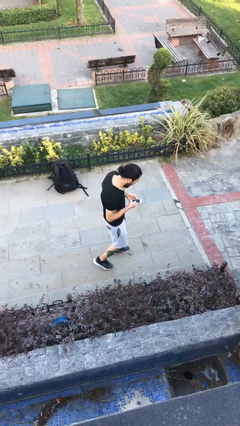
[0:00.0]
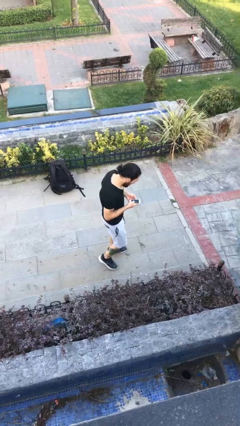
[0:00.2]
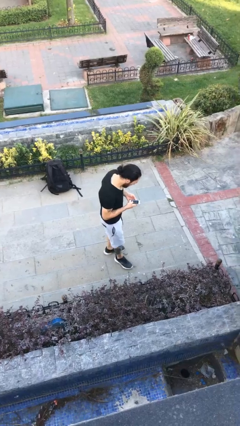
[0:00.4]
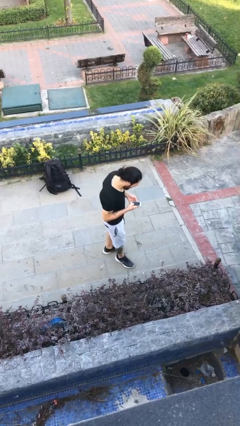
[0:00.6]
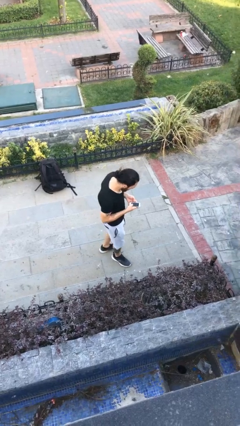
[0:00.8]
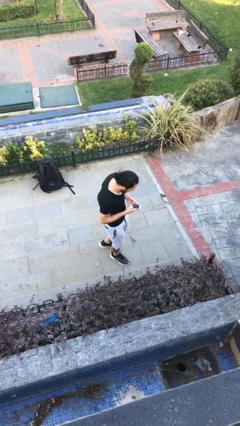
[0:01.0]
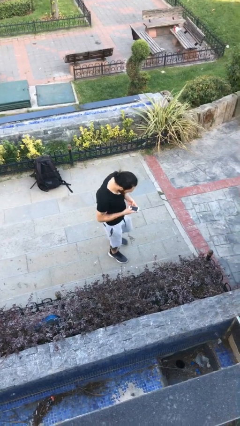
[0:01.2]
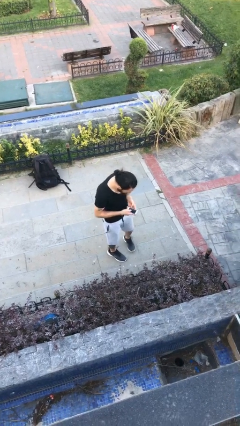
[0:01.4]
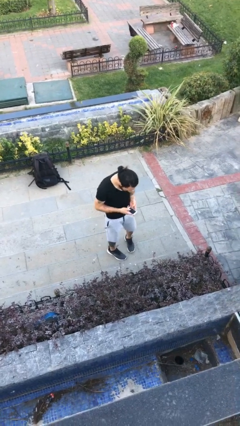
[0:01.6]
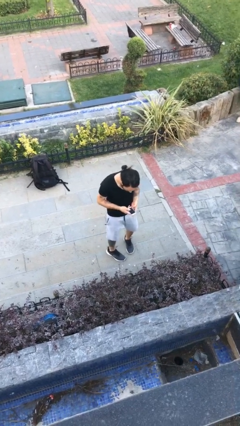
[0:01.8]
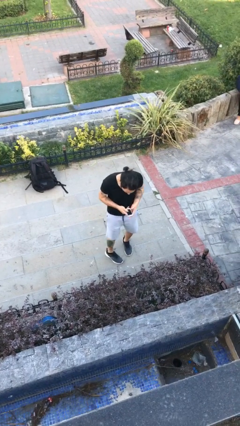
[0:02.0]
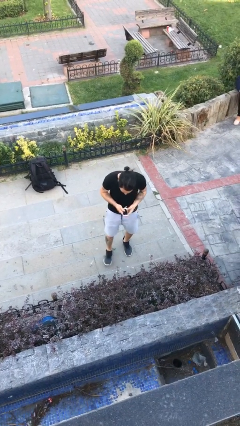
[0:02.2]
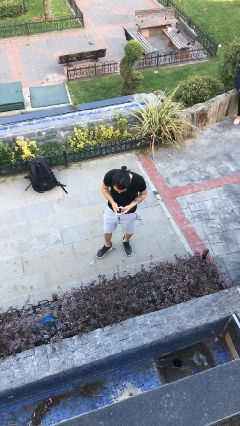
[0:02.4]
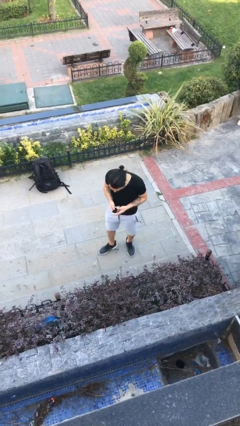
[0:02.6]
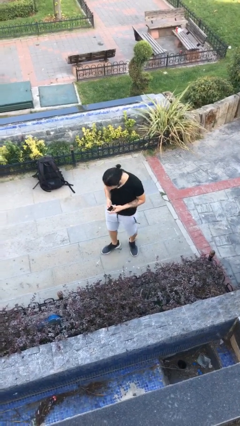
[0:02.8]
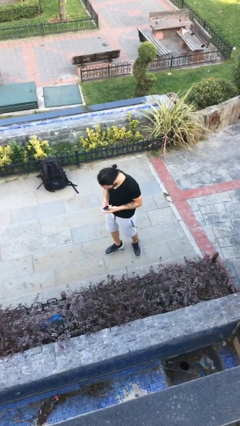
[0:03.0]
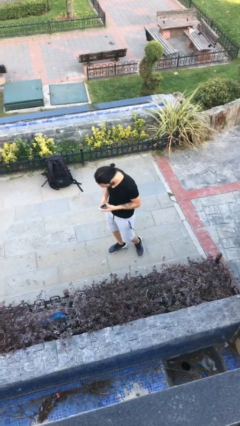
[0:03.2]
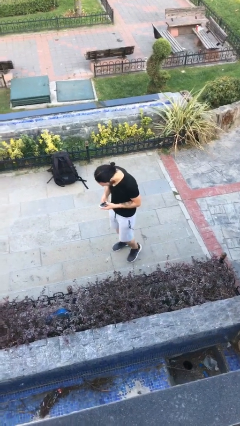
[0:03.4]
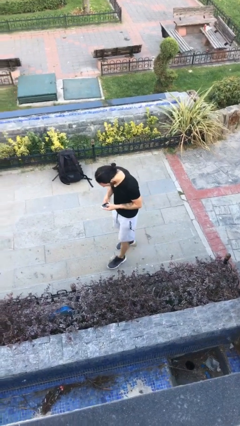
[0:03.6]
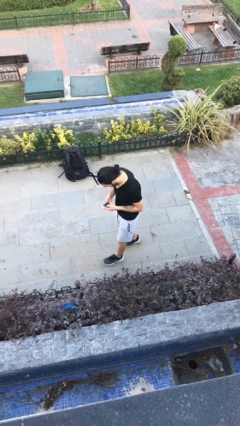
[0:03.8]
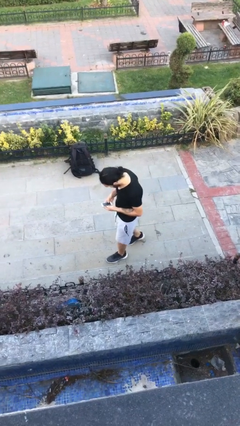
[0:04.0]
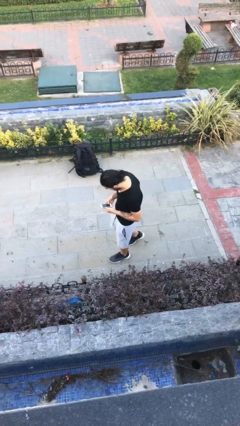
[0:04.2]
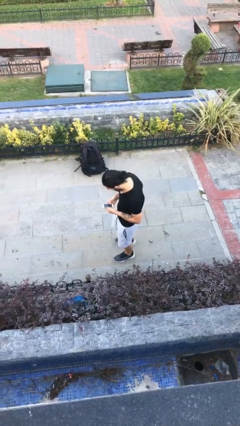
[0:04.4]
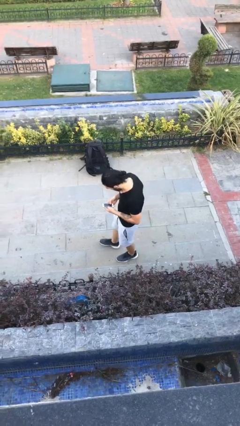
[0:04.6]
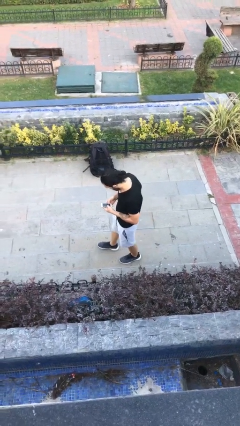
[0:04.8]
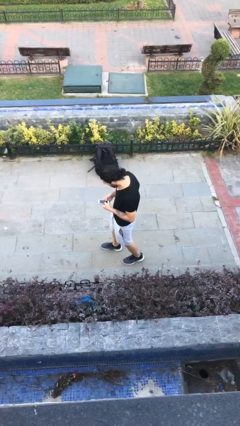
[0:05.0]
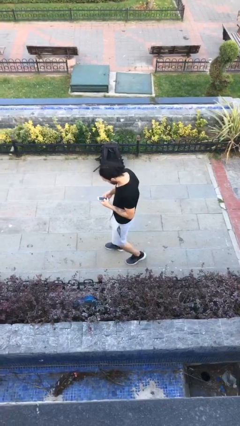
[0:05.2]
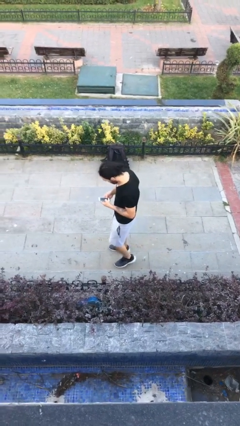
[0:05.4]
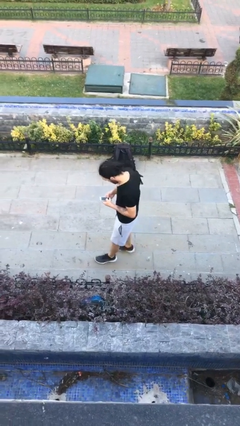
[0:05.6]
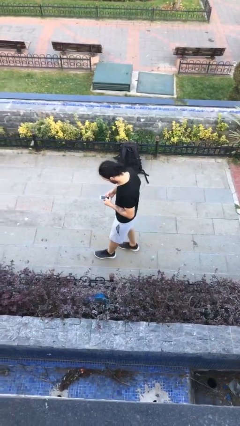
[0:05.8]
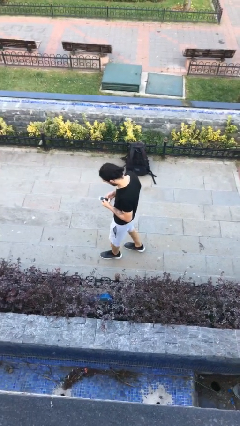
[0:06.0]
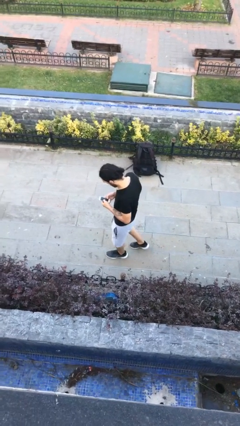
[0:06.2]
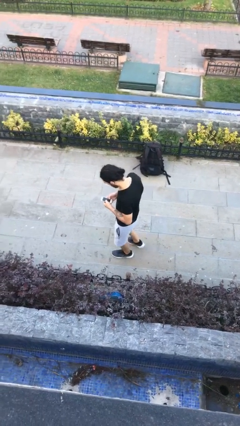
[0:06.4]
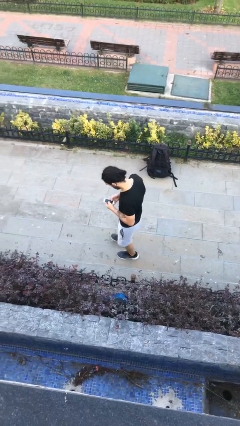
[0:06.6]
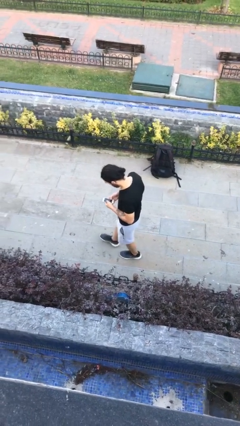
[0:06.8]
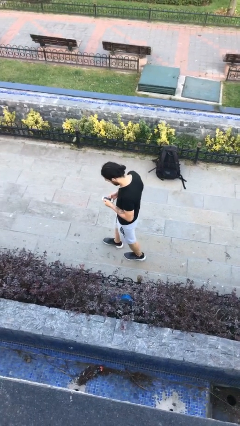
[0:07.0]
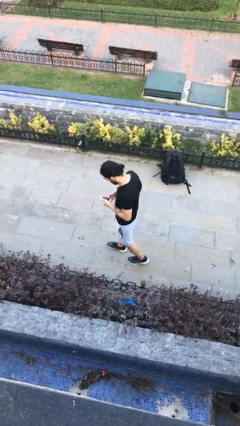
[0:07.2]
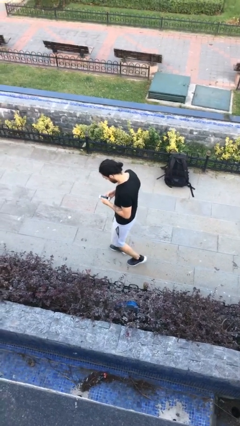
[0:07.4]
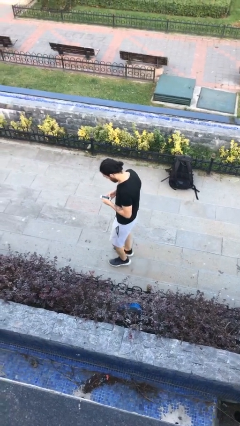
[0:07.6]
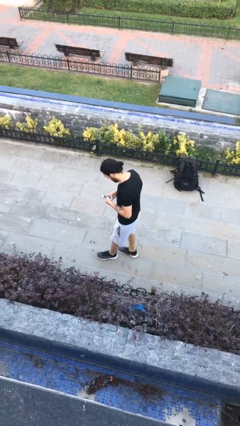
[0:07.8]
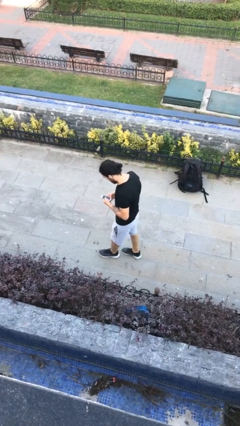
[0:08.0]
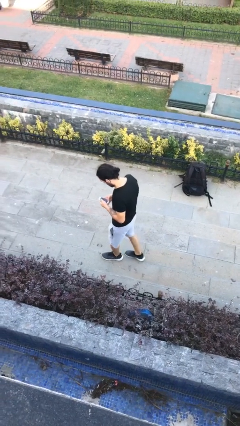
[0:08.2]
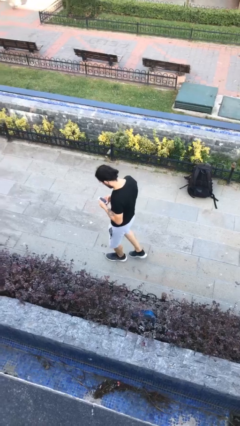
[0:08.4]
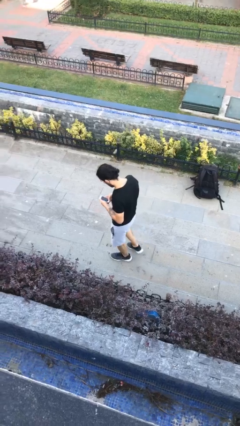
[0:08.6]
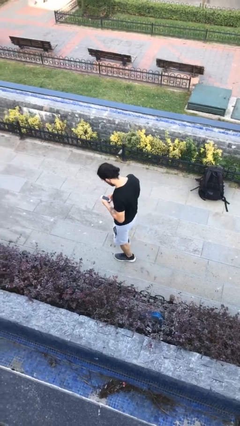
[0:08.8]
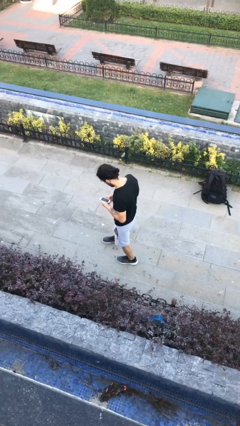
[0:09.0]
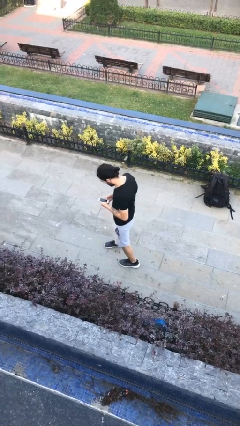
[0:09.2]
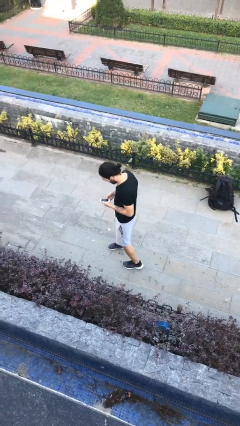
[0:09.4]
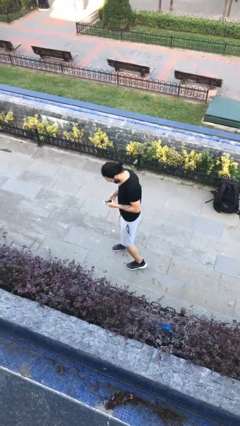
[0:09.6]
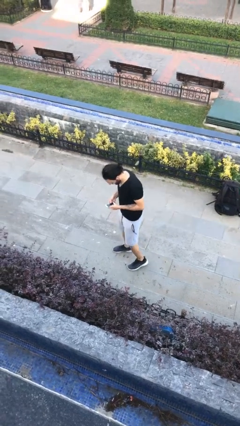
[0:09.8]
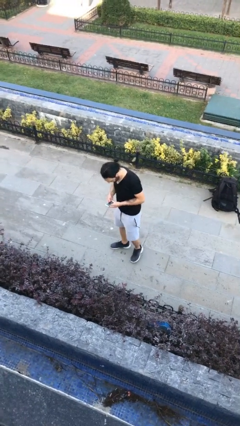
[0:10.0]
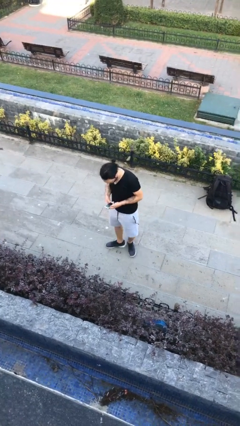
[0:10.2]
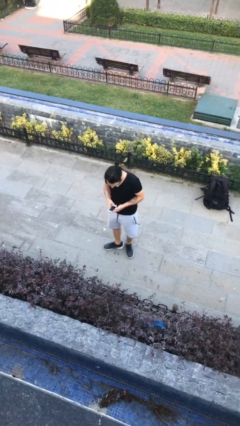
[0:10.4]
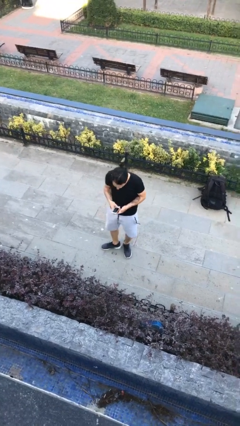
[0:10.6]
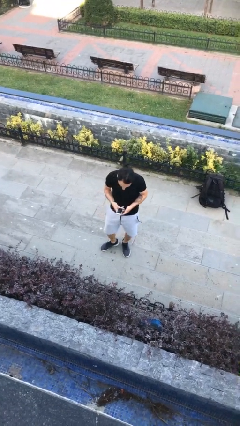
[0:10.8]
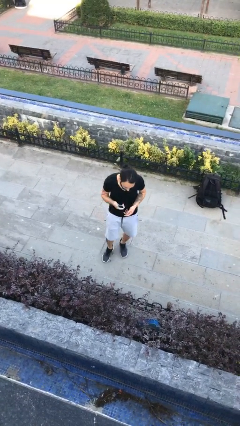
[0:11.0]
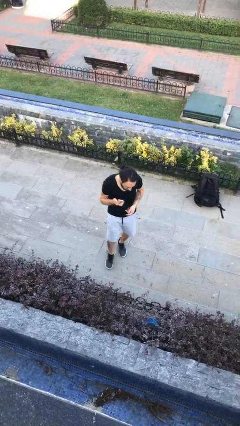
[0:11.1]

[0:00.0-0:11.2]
person texts on phone

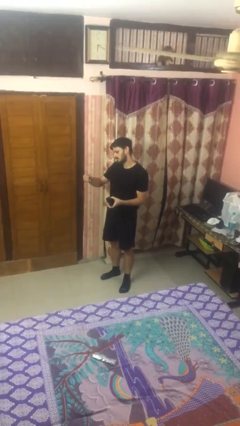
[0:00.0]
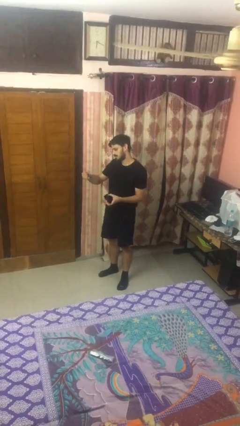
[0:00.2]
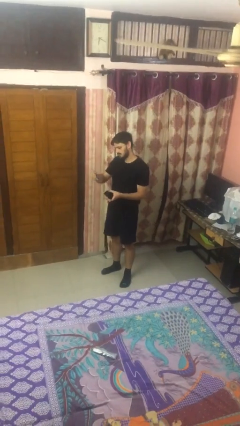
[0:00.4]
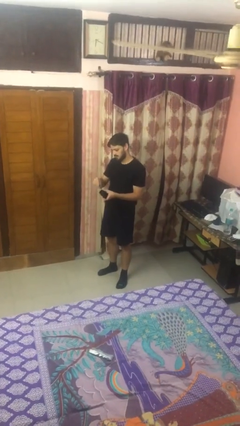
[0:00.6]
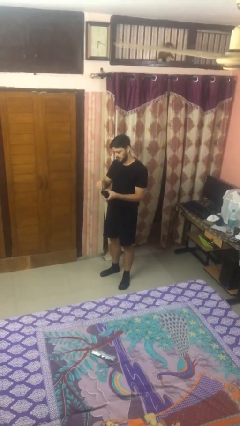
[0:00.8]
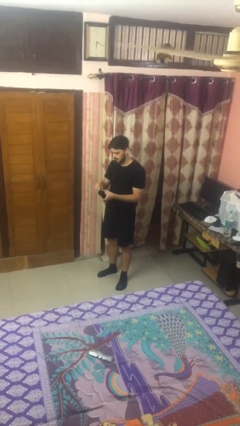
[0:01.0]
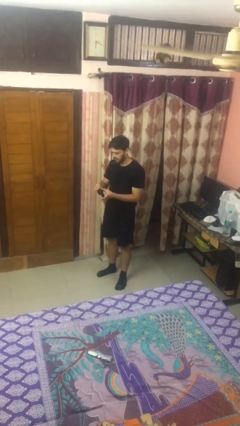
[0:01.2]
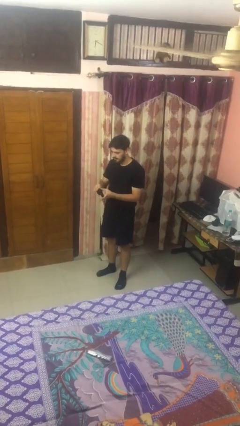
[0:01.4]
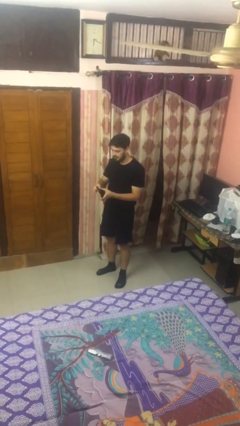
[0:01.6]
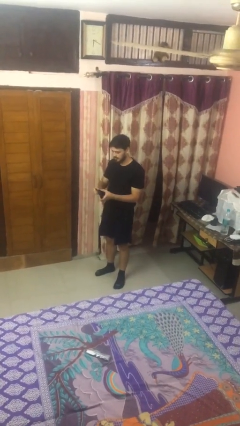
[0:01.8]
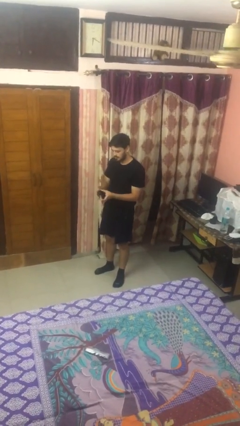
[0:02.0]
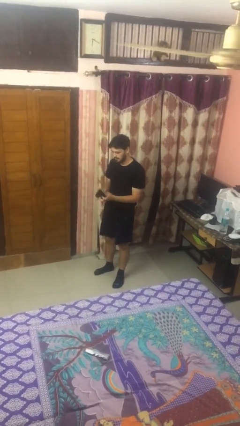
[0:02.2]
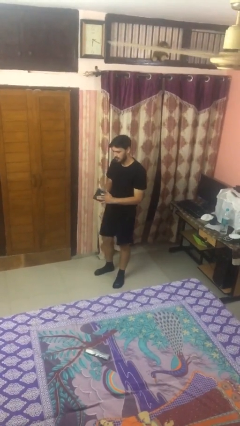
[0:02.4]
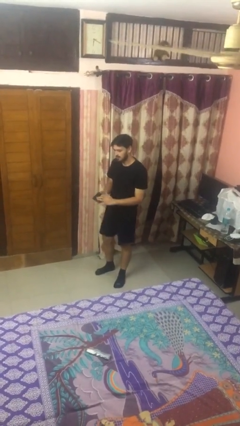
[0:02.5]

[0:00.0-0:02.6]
person puts object into purse

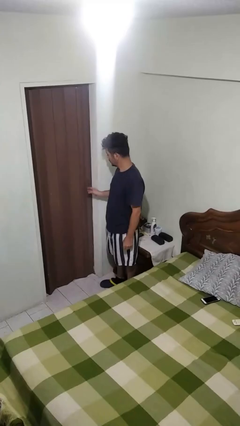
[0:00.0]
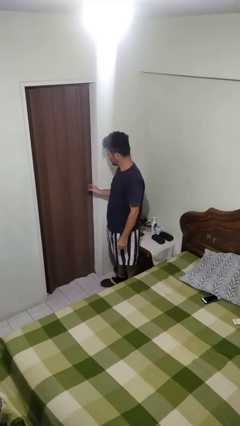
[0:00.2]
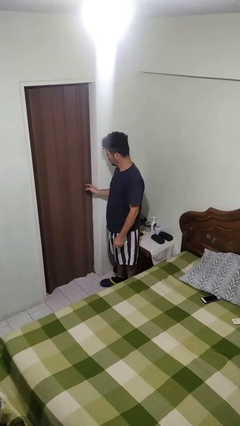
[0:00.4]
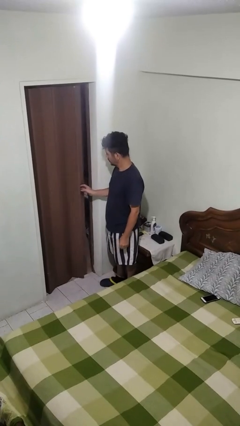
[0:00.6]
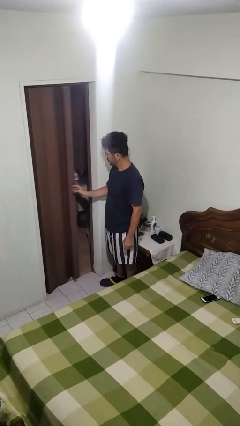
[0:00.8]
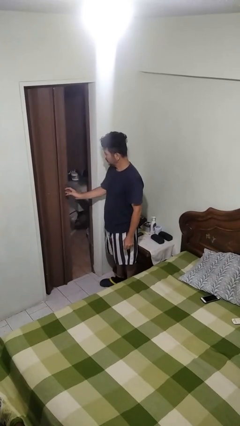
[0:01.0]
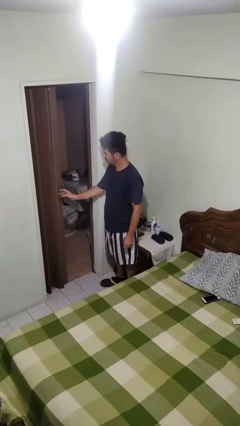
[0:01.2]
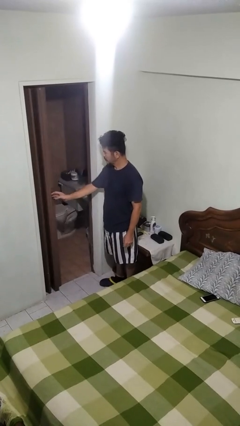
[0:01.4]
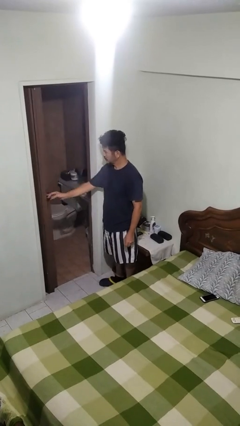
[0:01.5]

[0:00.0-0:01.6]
person opens sliding door

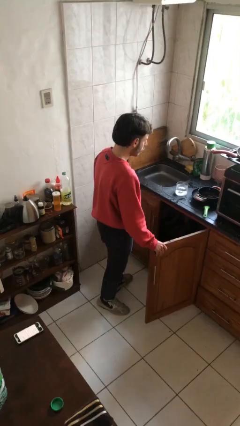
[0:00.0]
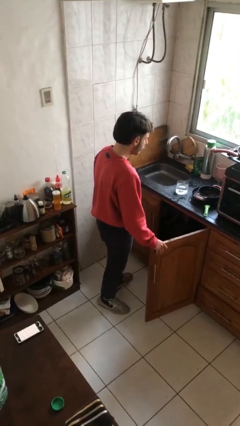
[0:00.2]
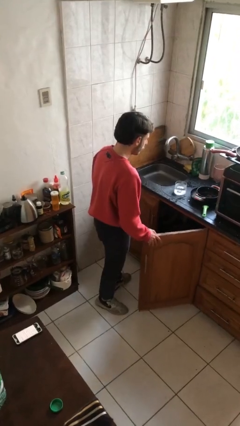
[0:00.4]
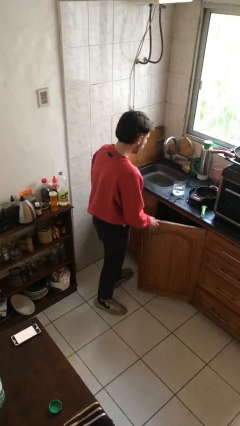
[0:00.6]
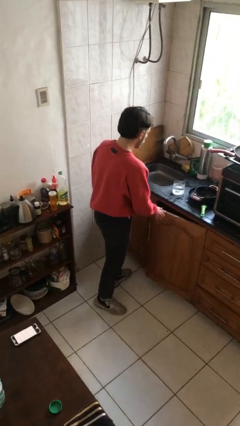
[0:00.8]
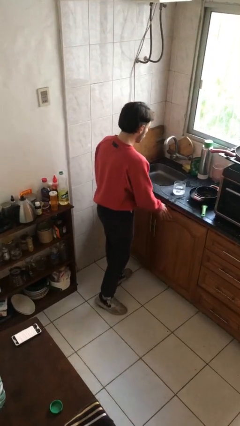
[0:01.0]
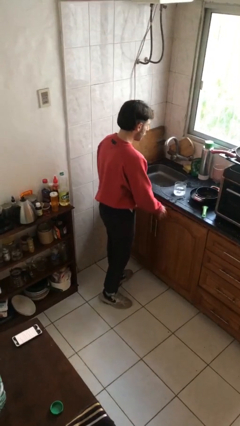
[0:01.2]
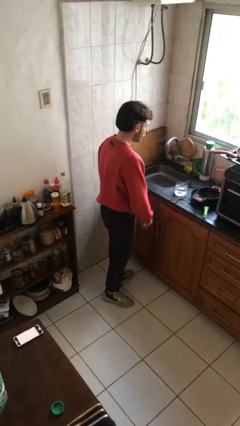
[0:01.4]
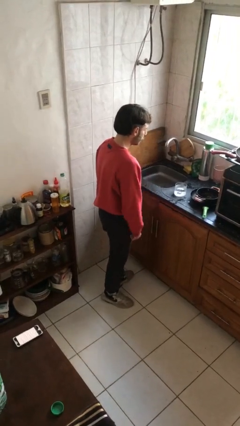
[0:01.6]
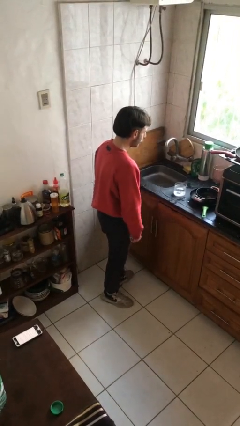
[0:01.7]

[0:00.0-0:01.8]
person closes cabinet

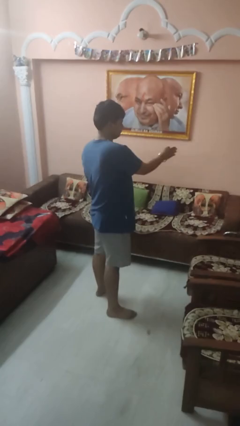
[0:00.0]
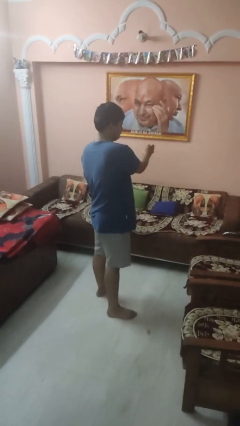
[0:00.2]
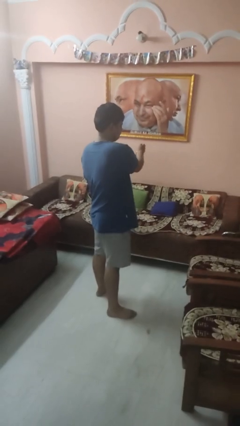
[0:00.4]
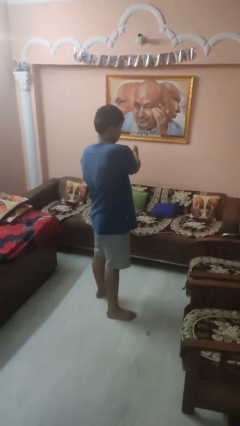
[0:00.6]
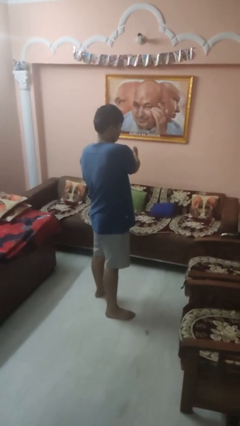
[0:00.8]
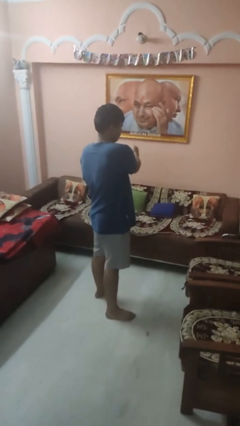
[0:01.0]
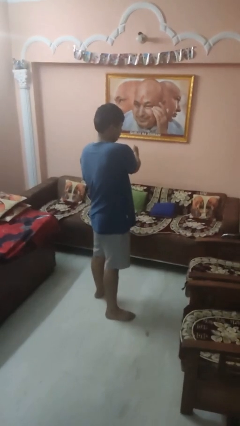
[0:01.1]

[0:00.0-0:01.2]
person gestures swipe left
